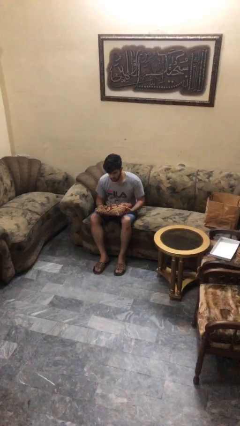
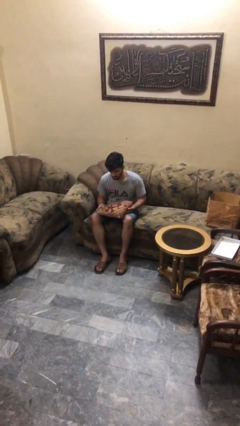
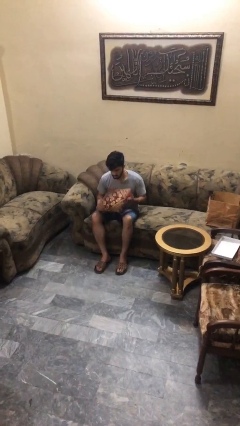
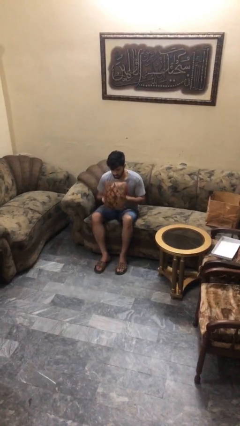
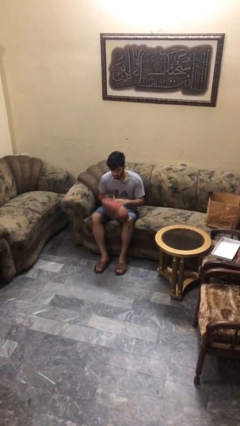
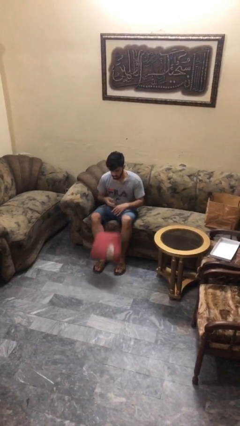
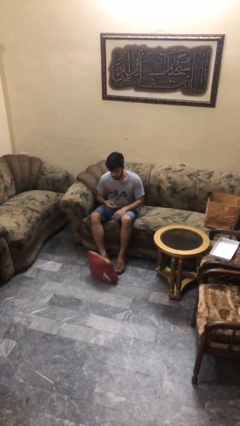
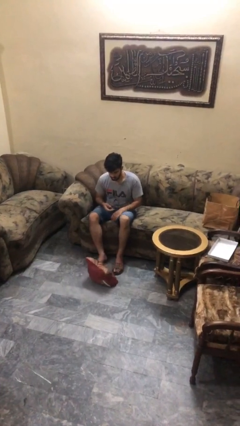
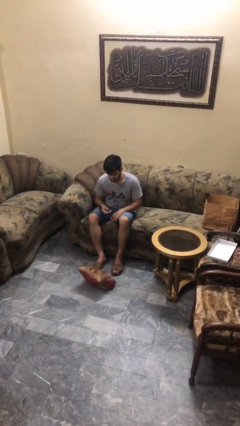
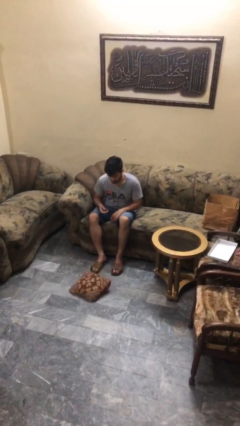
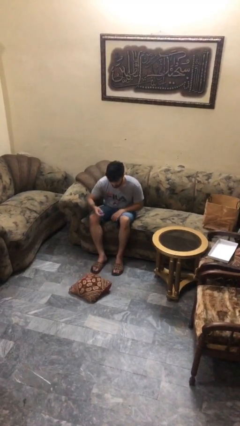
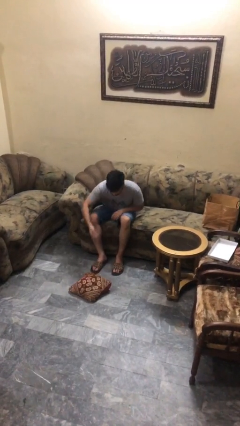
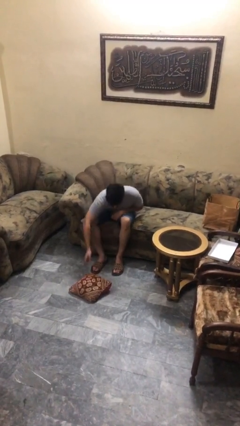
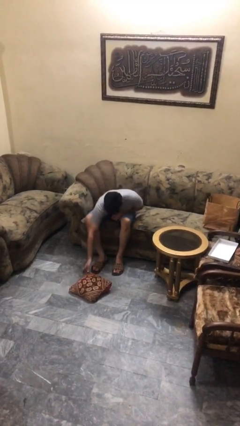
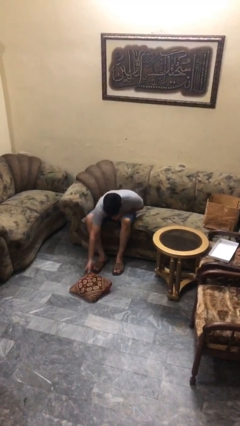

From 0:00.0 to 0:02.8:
person drops object

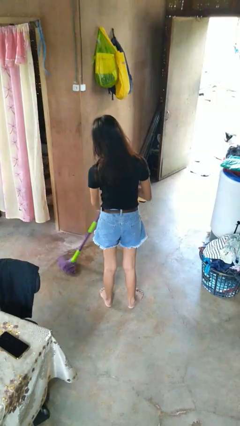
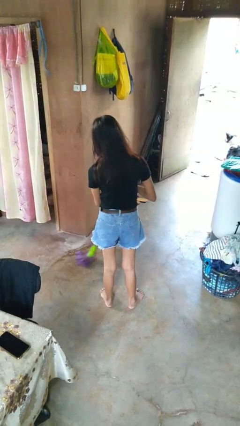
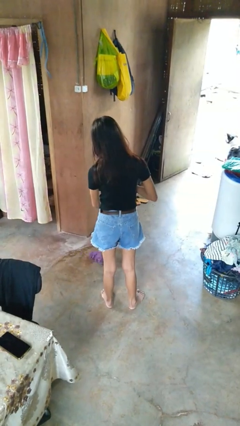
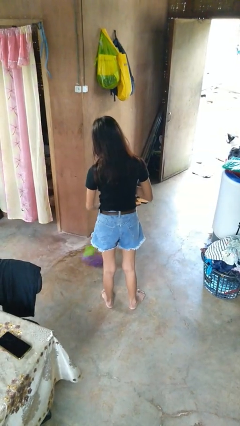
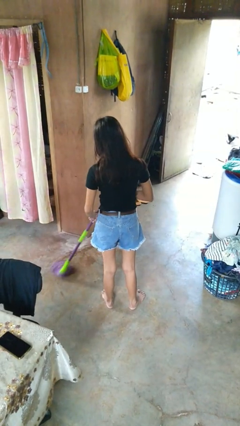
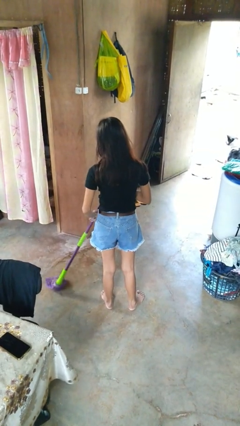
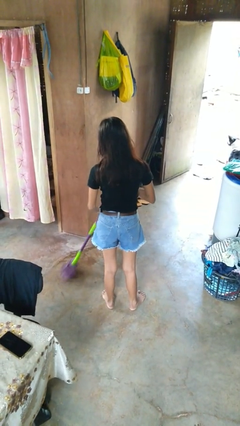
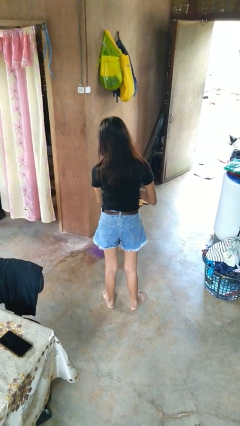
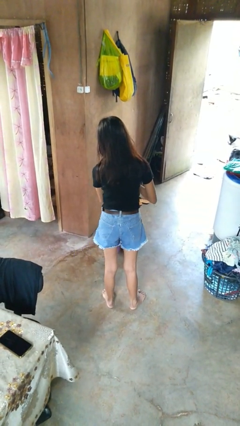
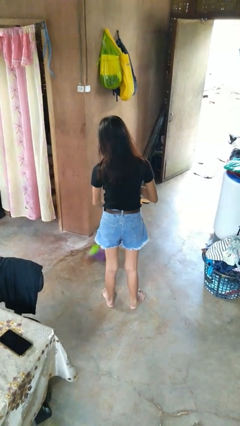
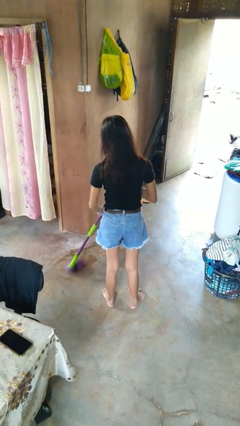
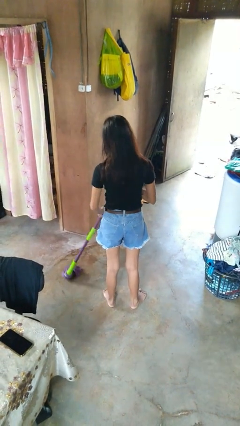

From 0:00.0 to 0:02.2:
person mops

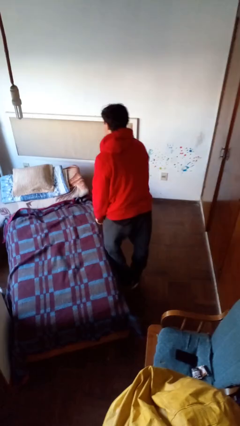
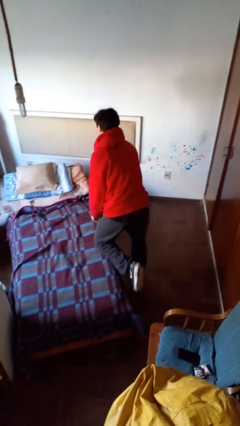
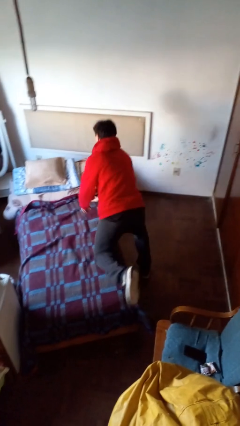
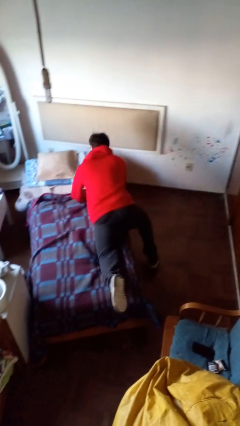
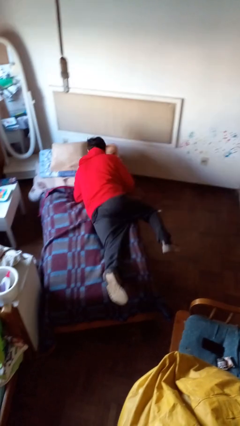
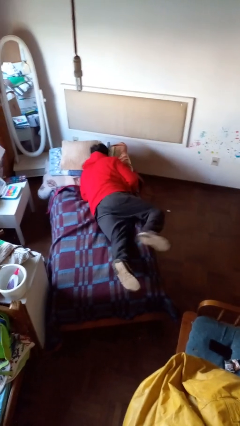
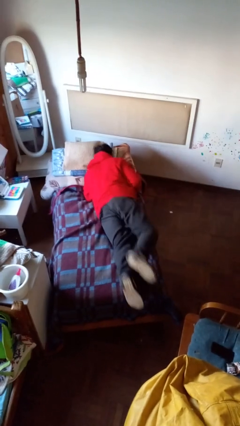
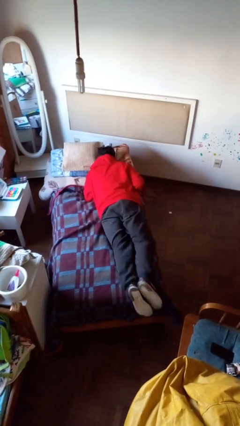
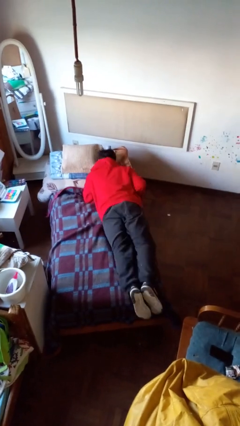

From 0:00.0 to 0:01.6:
person lies down on bed

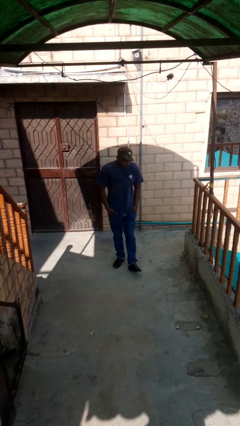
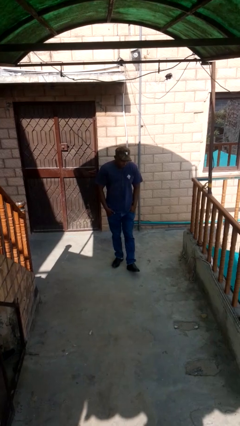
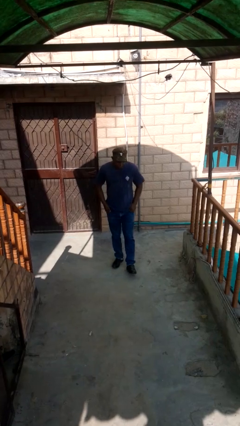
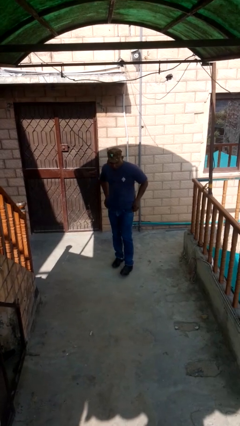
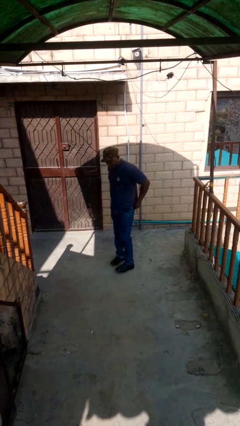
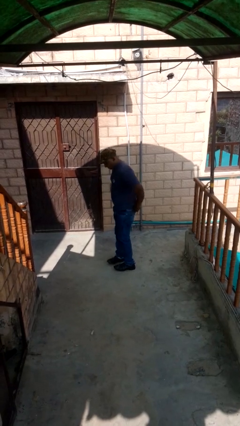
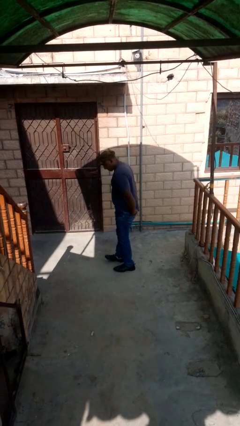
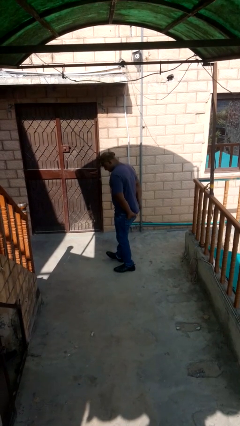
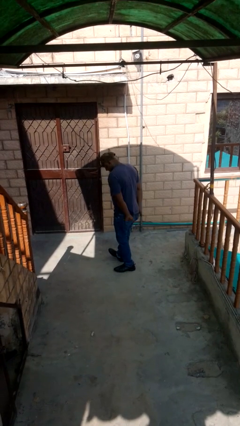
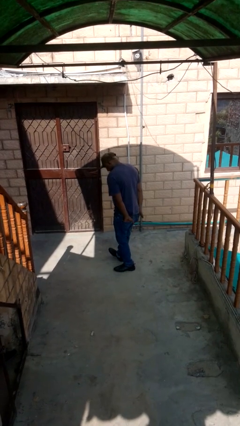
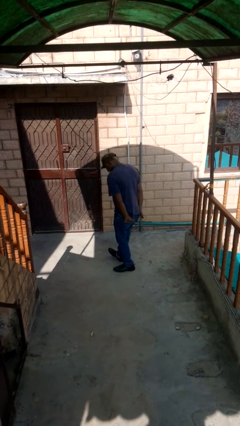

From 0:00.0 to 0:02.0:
person puts hands in back pockets

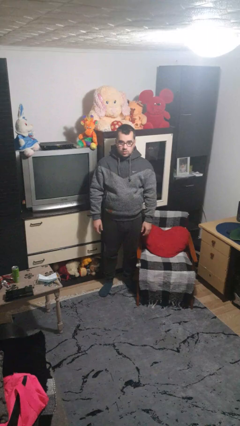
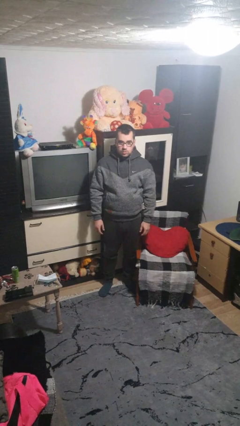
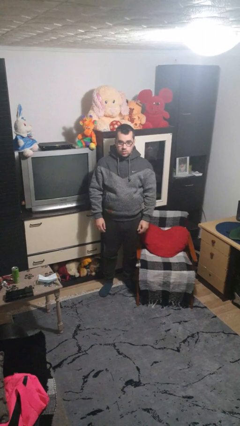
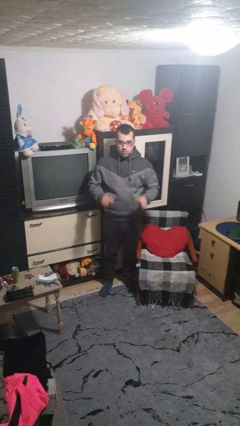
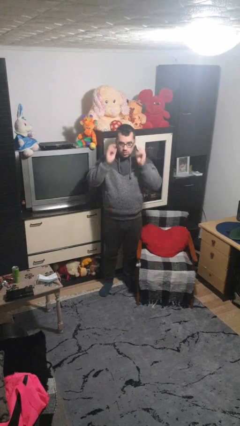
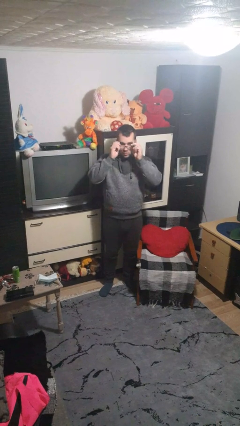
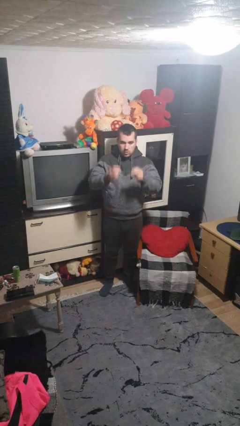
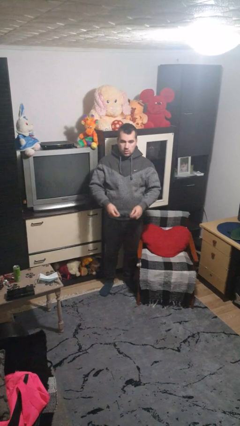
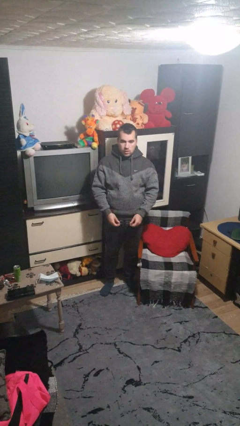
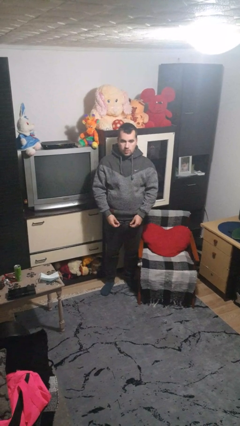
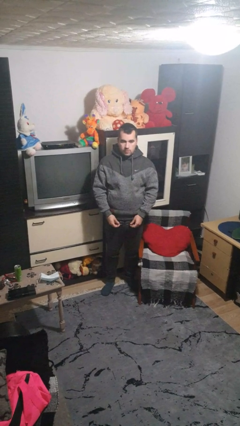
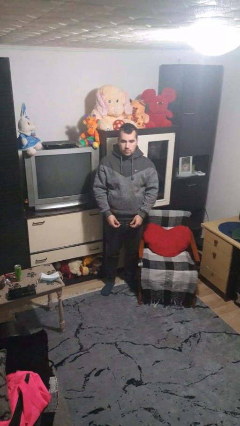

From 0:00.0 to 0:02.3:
person takes off glasses

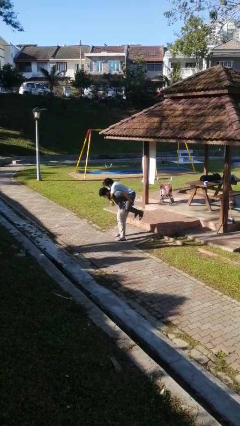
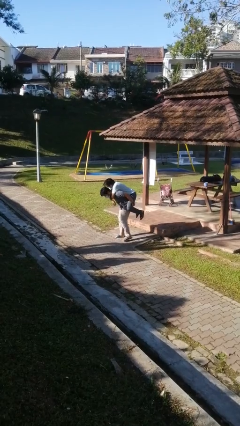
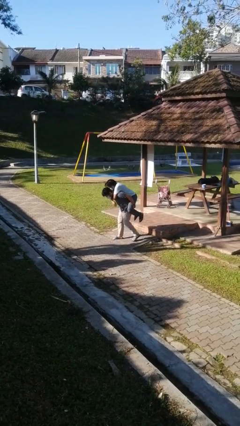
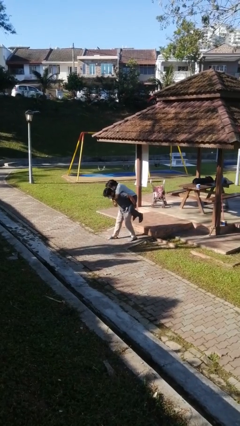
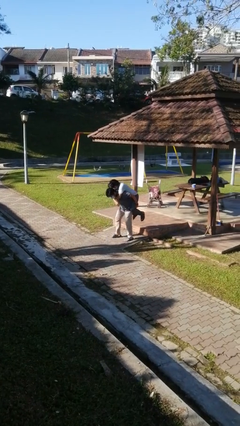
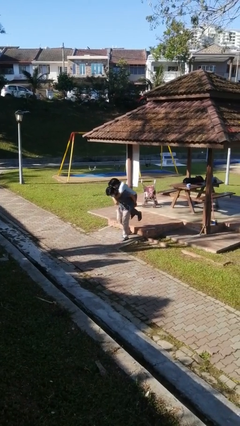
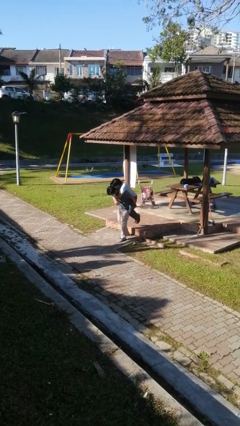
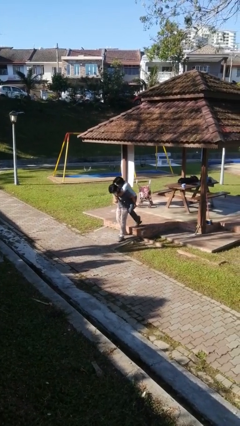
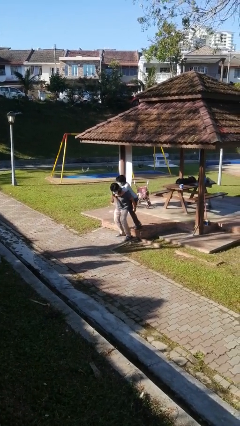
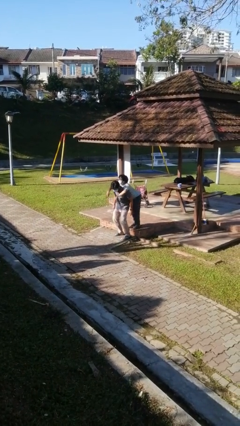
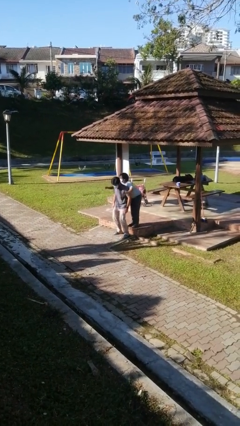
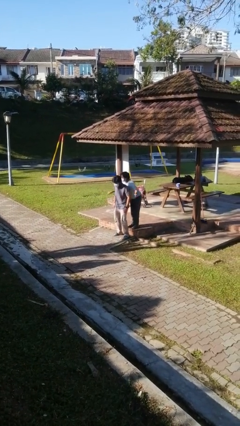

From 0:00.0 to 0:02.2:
person puts down person

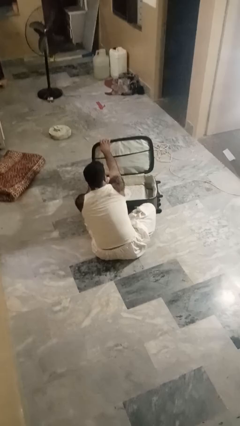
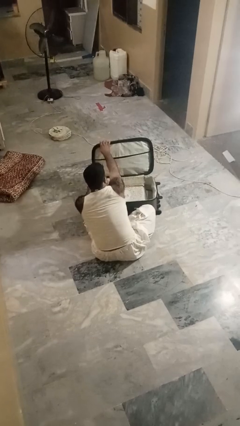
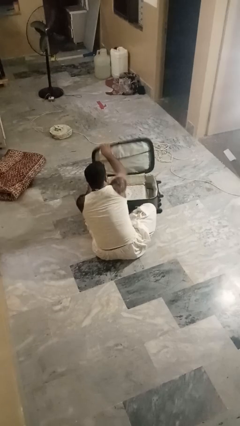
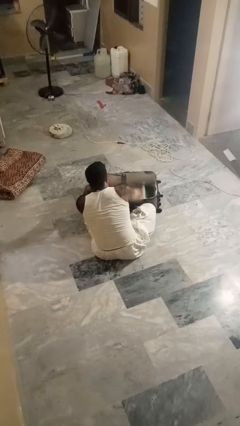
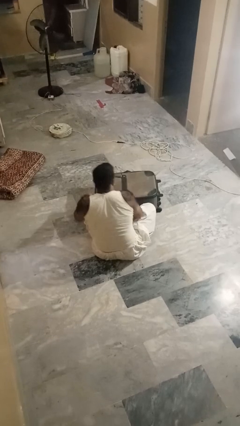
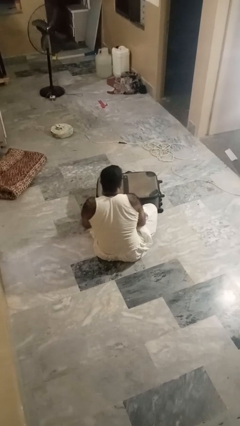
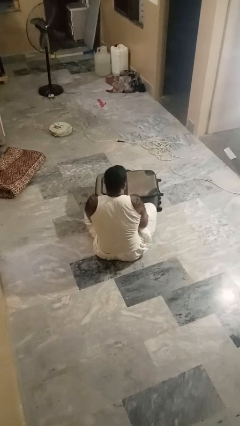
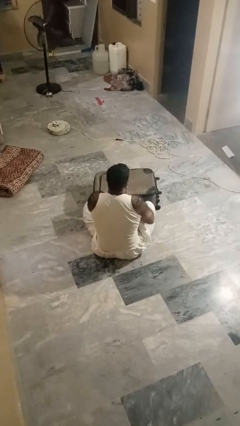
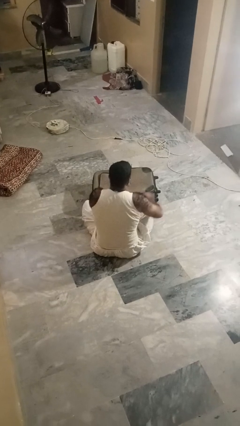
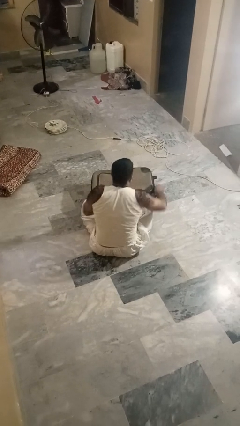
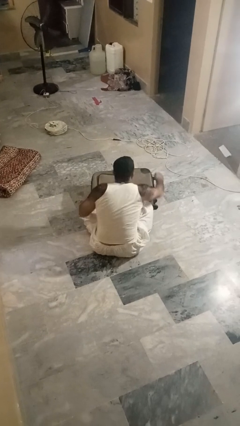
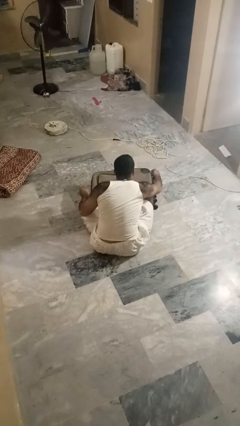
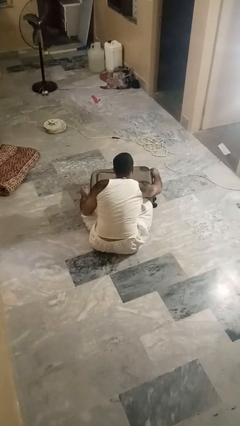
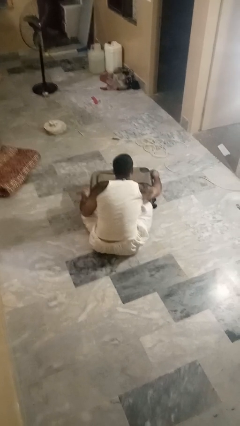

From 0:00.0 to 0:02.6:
person closes suitcase

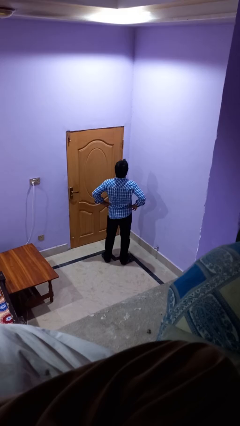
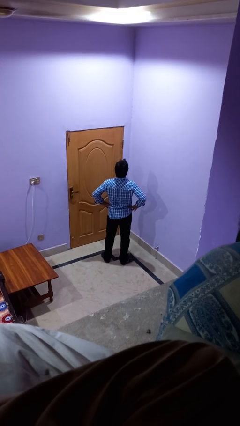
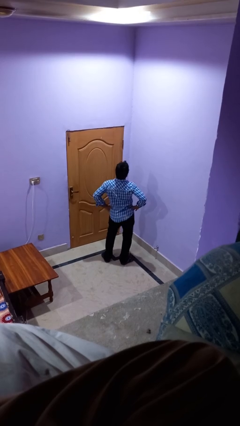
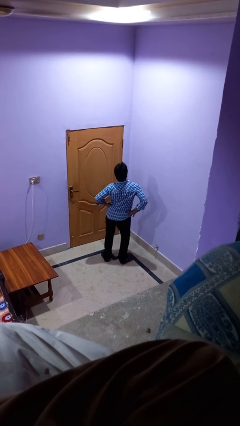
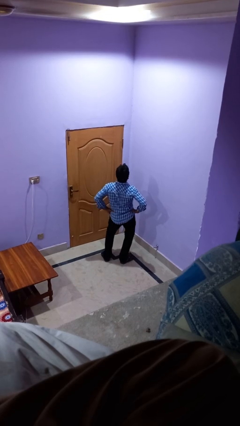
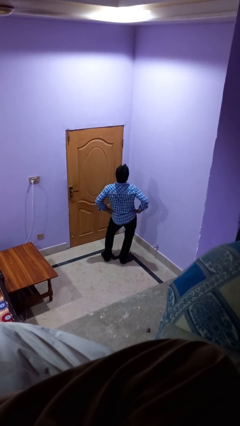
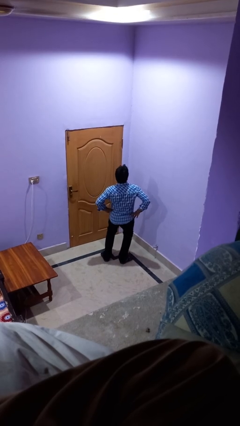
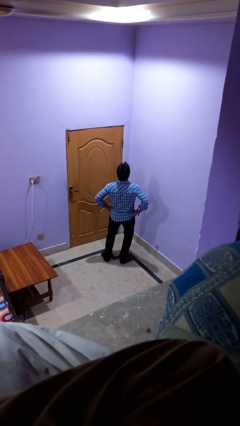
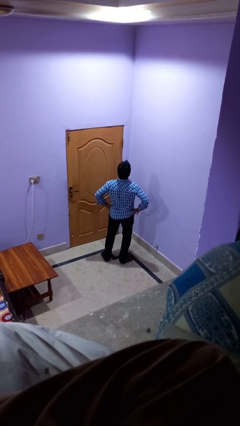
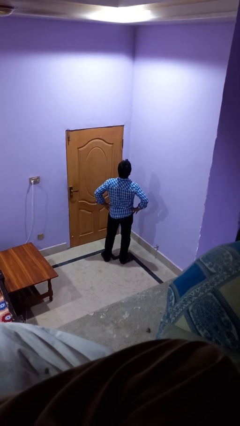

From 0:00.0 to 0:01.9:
person wiggles hips
